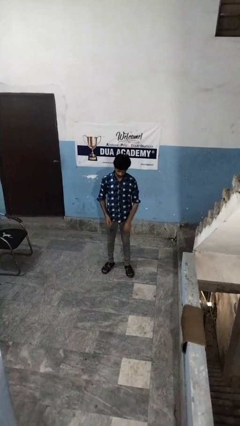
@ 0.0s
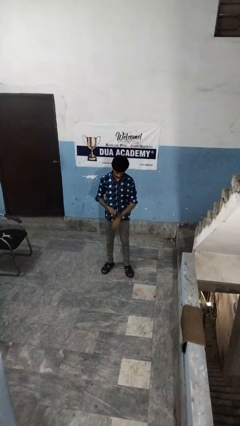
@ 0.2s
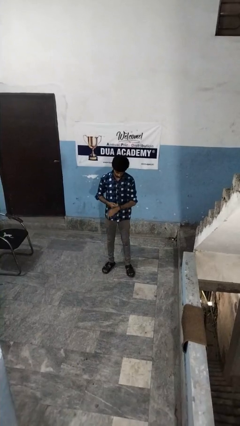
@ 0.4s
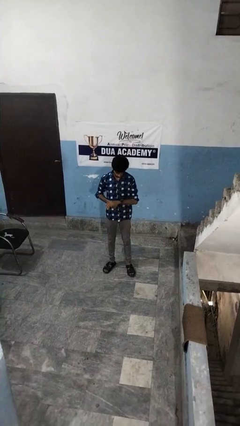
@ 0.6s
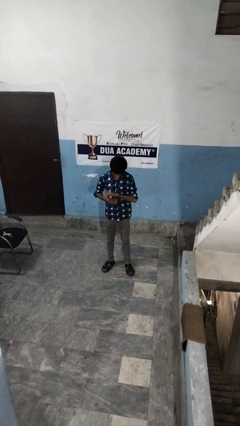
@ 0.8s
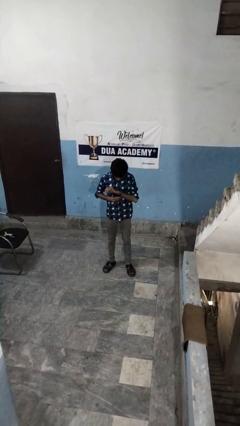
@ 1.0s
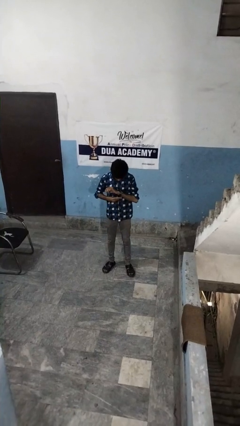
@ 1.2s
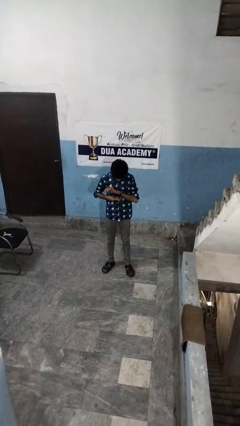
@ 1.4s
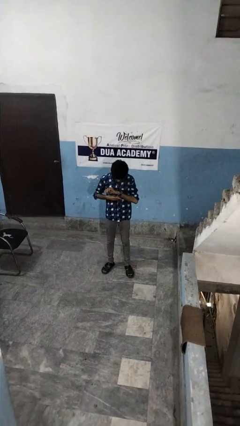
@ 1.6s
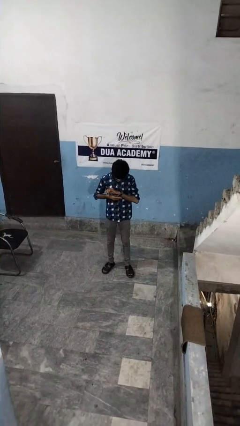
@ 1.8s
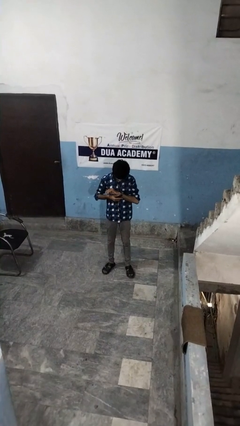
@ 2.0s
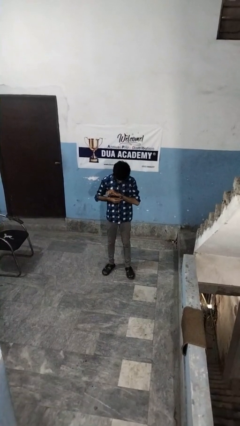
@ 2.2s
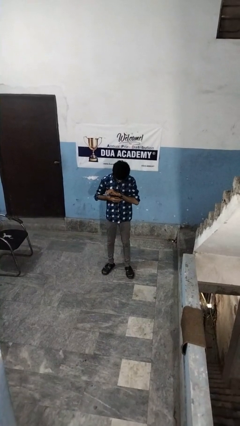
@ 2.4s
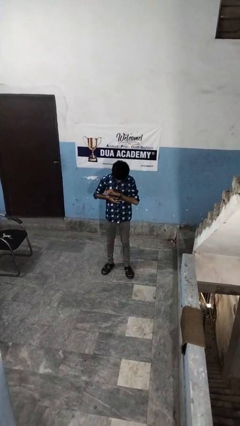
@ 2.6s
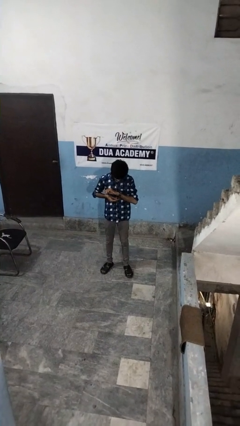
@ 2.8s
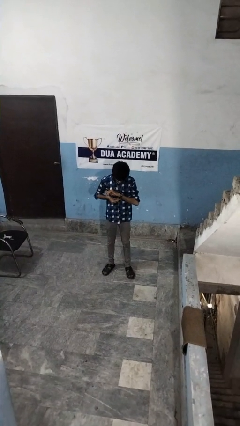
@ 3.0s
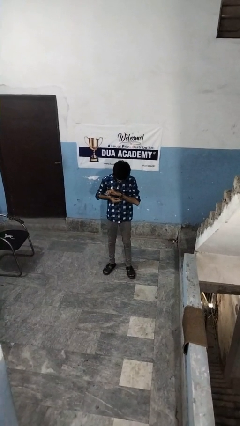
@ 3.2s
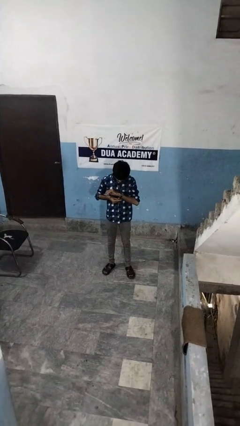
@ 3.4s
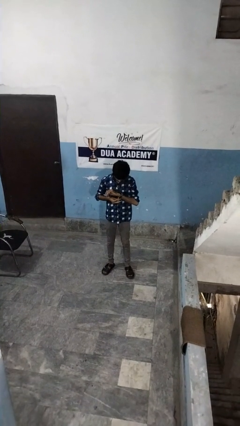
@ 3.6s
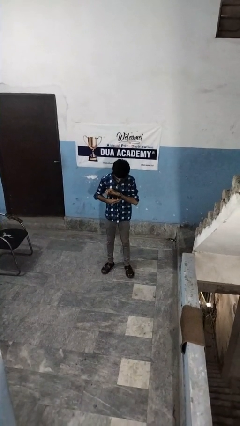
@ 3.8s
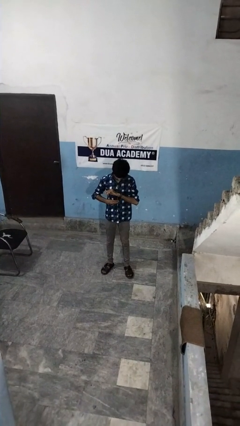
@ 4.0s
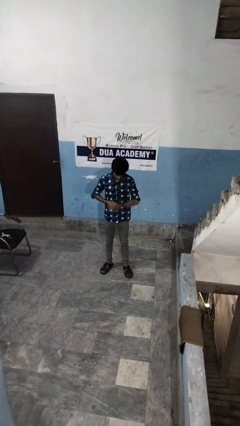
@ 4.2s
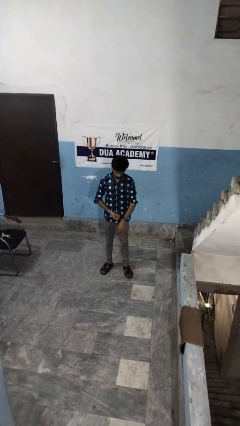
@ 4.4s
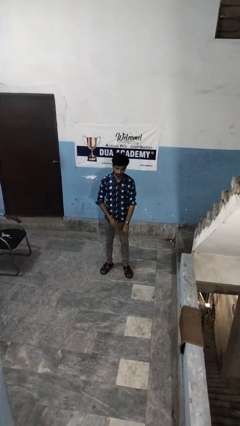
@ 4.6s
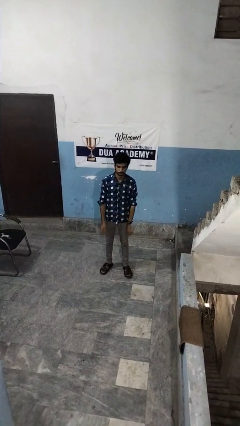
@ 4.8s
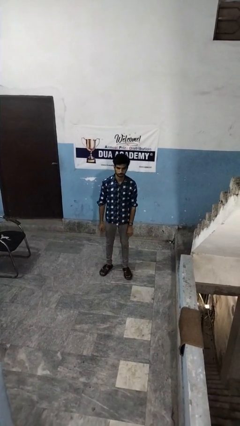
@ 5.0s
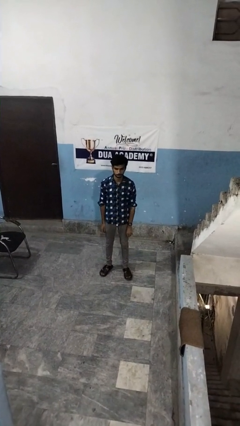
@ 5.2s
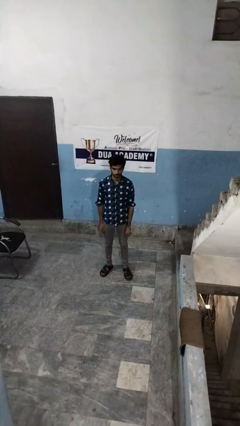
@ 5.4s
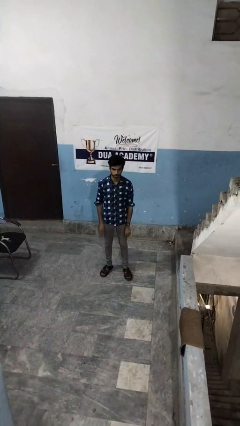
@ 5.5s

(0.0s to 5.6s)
person puts on wristwatch

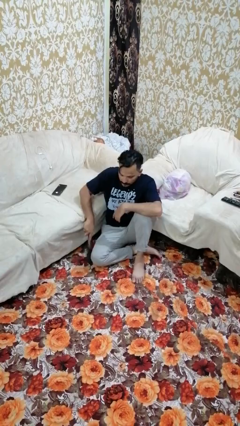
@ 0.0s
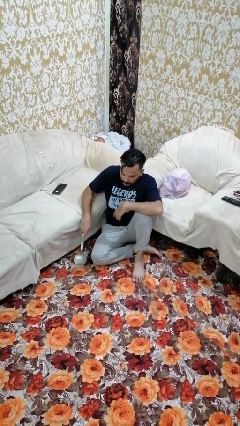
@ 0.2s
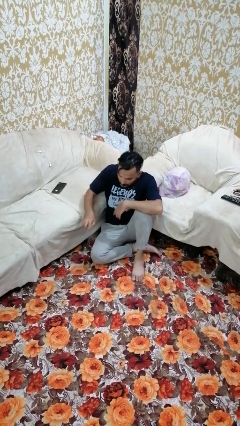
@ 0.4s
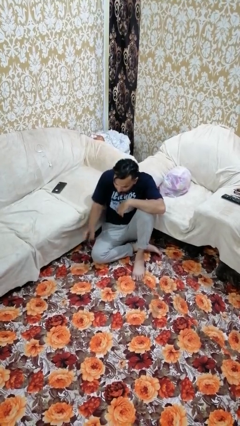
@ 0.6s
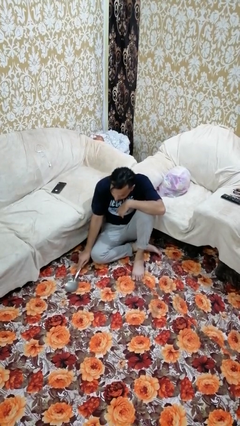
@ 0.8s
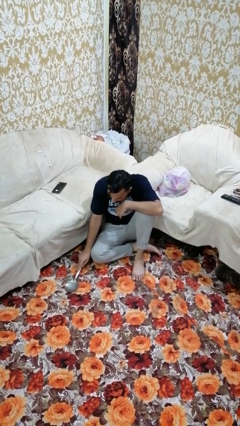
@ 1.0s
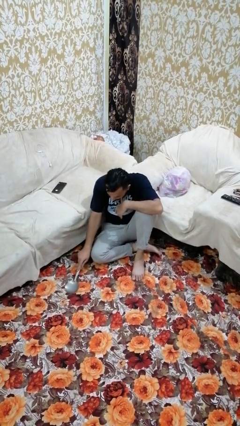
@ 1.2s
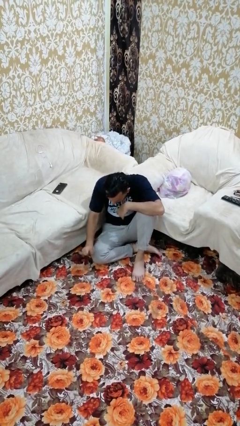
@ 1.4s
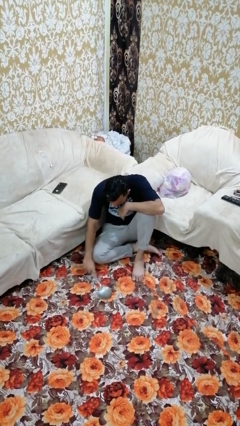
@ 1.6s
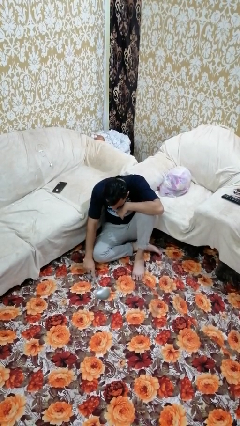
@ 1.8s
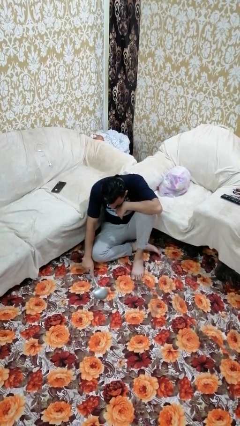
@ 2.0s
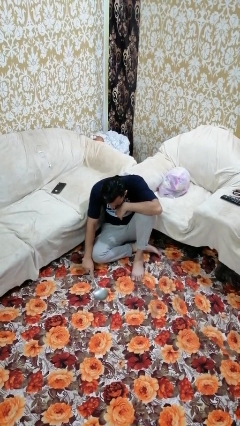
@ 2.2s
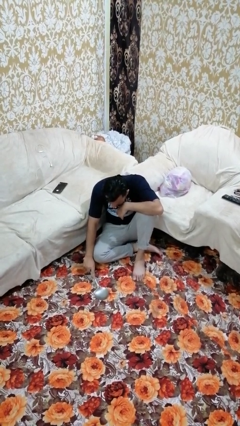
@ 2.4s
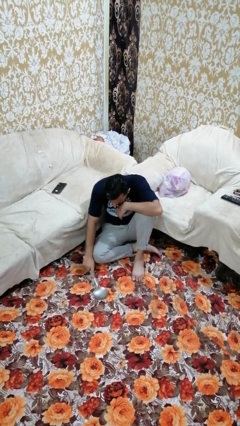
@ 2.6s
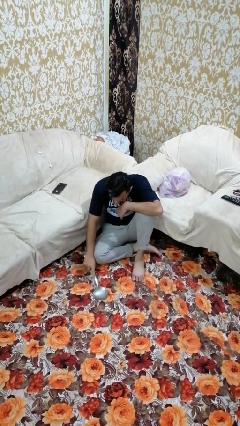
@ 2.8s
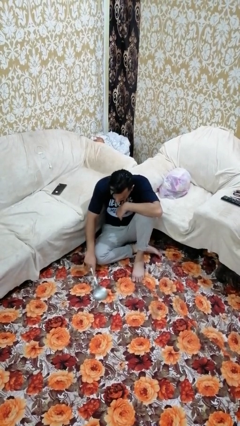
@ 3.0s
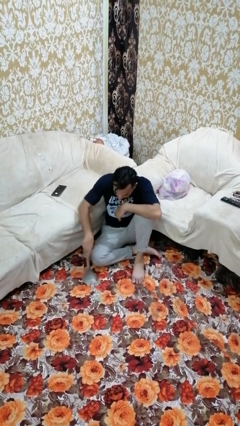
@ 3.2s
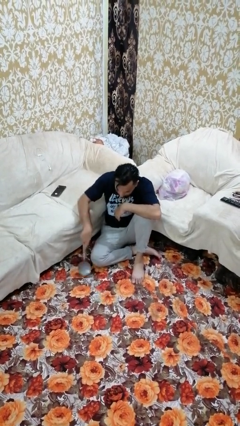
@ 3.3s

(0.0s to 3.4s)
person swats bug

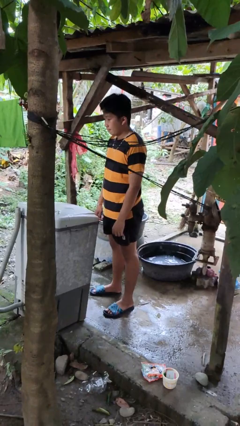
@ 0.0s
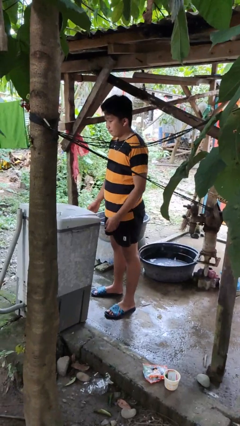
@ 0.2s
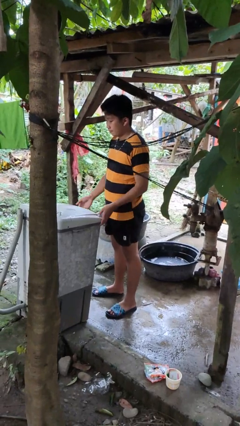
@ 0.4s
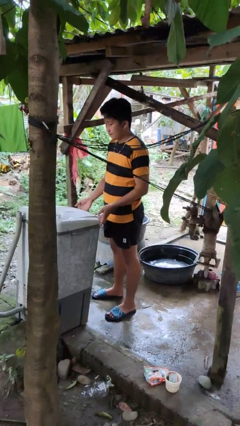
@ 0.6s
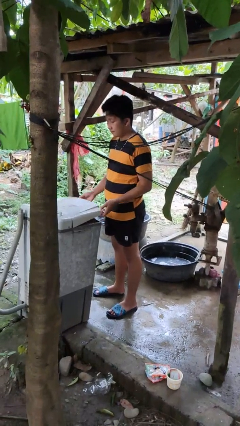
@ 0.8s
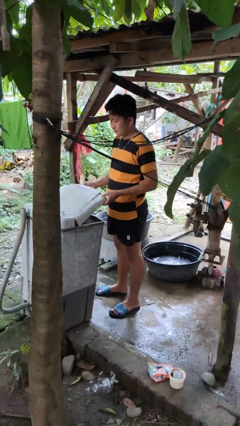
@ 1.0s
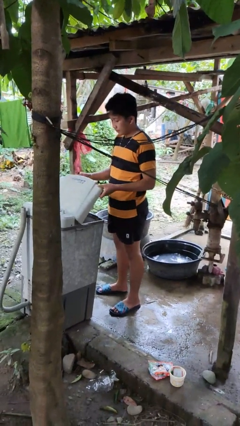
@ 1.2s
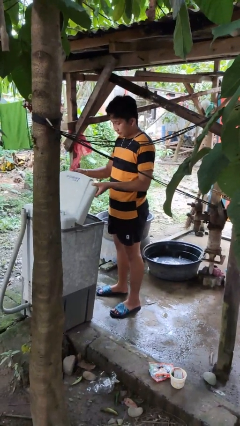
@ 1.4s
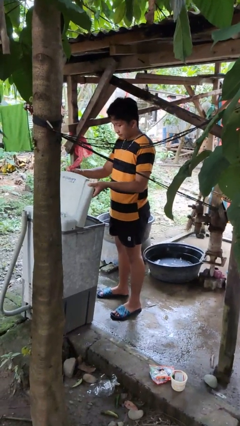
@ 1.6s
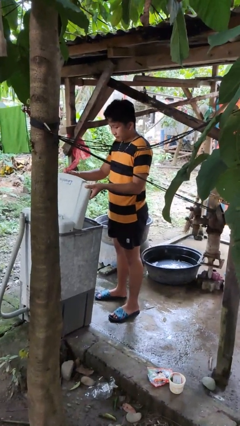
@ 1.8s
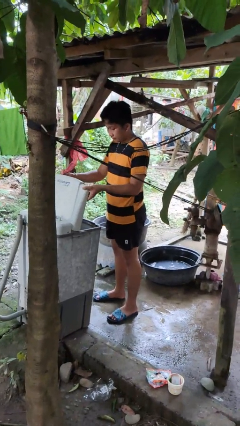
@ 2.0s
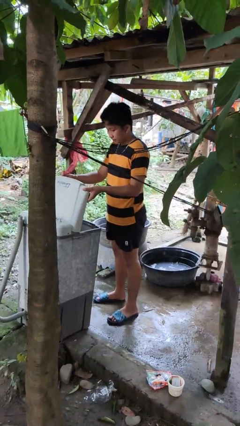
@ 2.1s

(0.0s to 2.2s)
person opens clothes washer

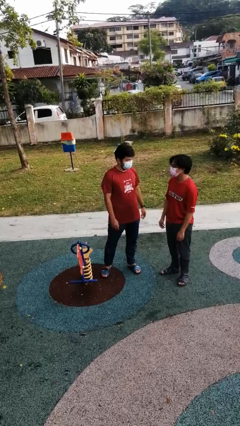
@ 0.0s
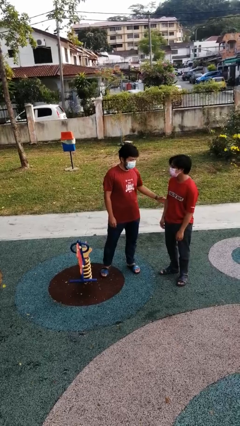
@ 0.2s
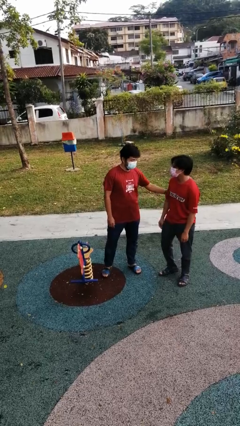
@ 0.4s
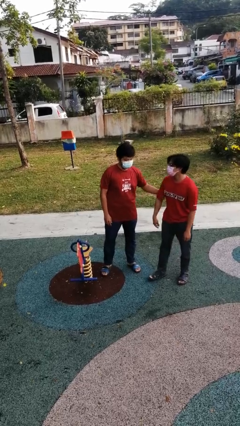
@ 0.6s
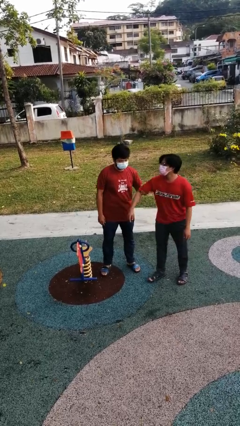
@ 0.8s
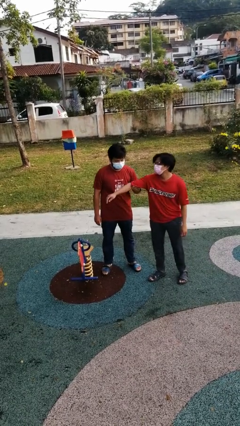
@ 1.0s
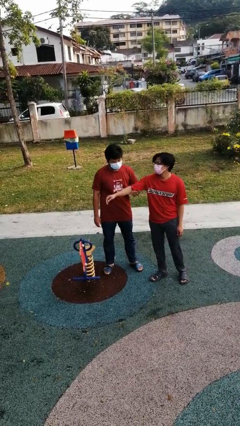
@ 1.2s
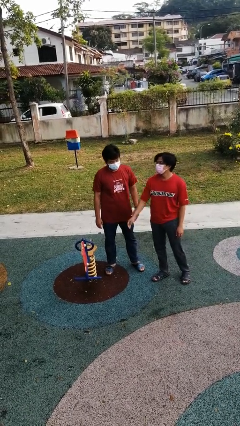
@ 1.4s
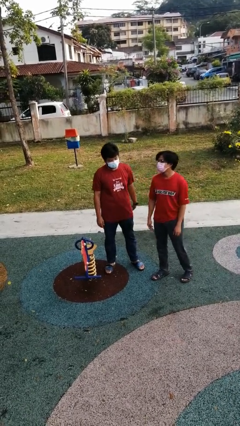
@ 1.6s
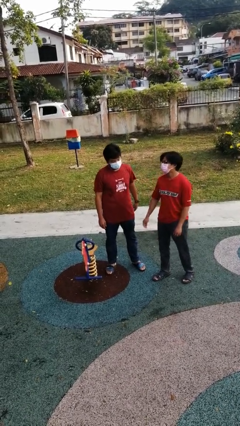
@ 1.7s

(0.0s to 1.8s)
person grabs person by bicep

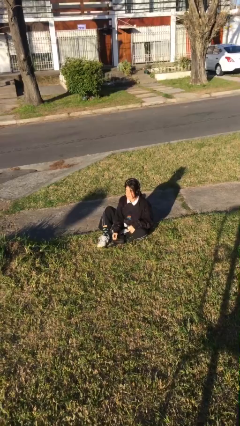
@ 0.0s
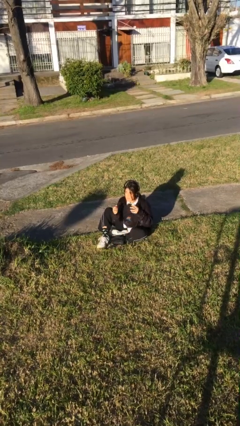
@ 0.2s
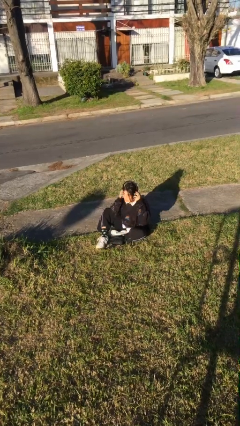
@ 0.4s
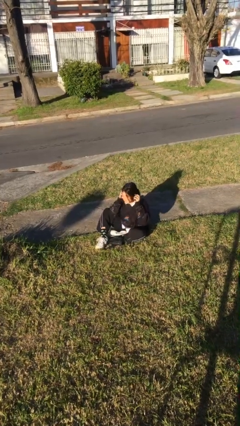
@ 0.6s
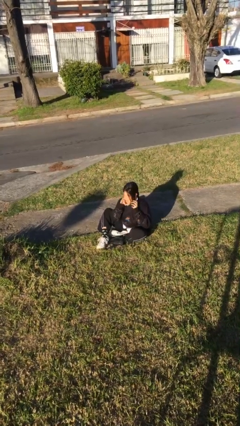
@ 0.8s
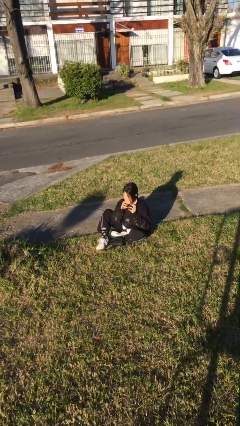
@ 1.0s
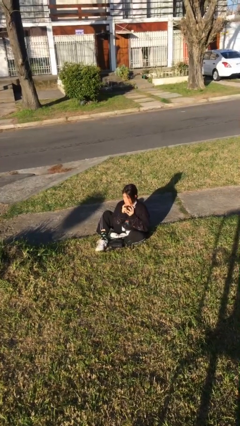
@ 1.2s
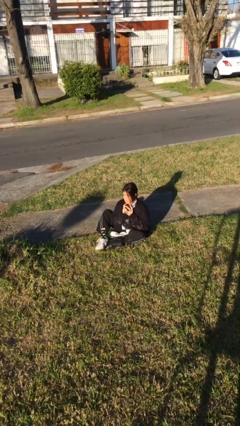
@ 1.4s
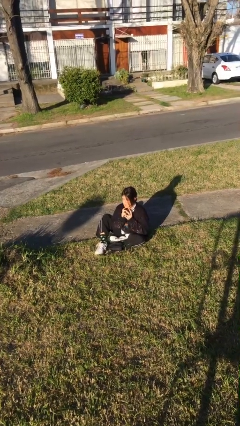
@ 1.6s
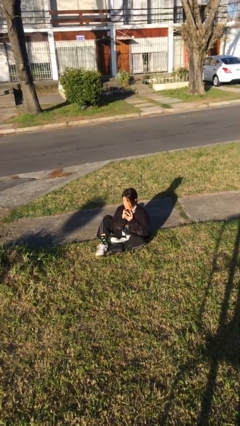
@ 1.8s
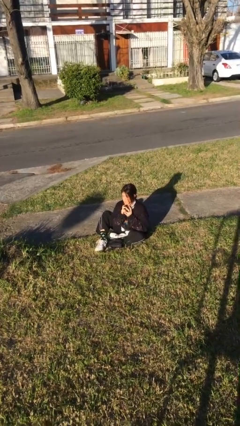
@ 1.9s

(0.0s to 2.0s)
person takes off headphones

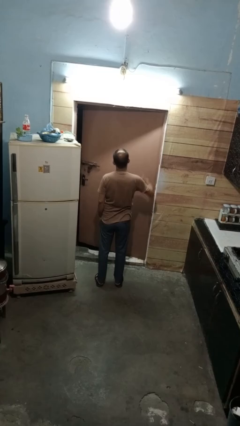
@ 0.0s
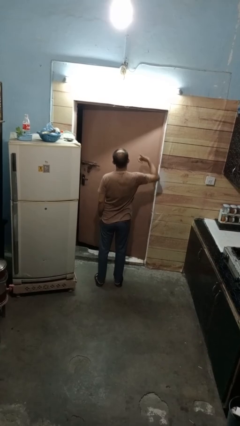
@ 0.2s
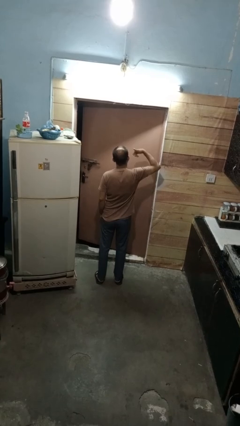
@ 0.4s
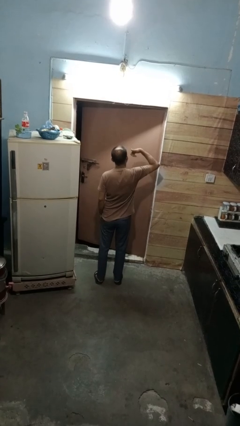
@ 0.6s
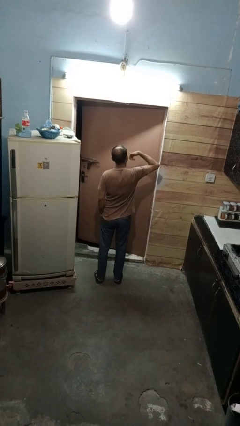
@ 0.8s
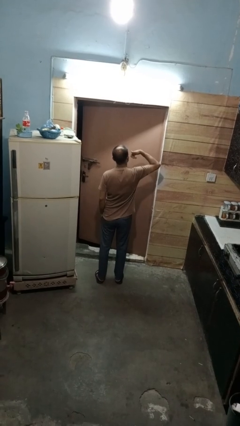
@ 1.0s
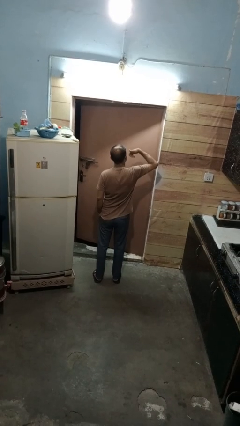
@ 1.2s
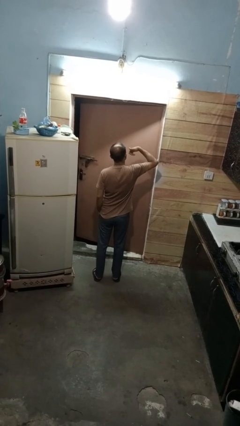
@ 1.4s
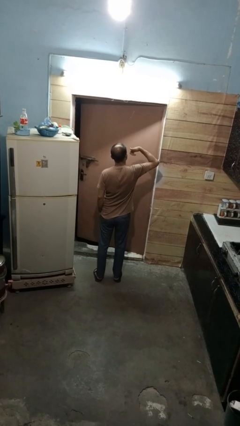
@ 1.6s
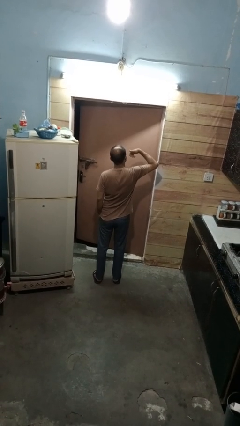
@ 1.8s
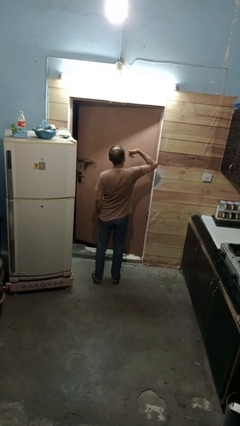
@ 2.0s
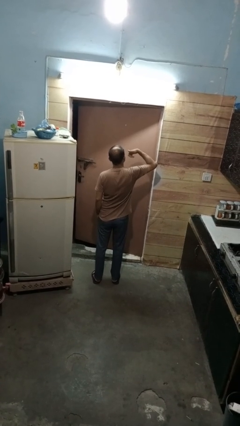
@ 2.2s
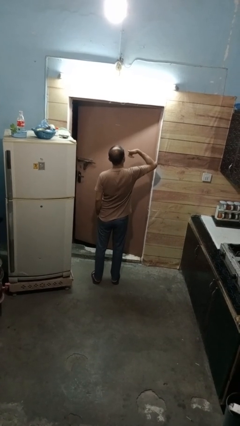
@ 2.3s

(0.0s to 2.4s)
person gestures call me
